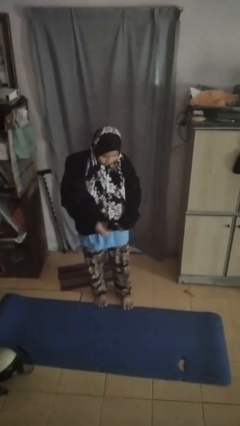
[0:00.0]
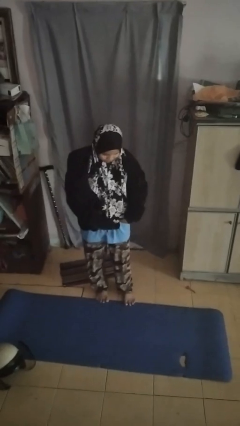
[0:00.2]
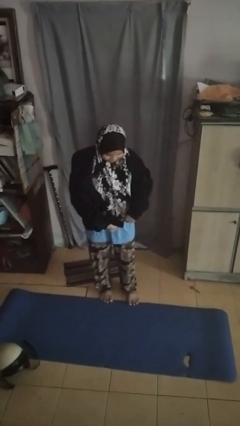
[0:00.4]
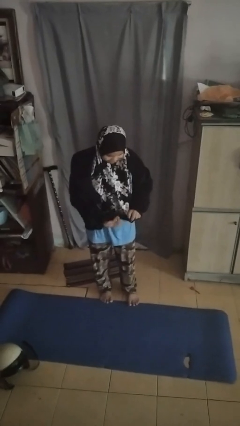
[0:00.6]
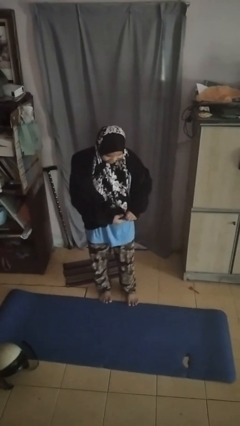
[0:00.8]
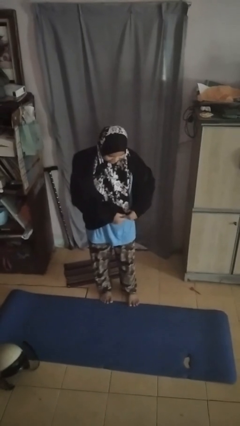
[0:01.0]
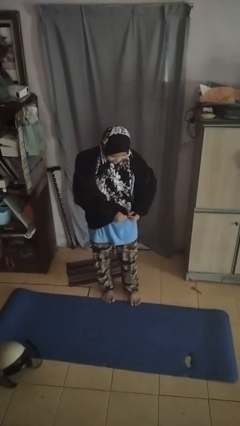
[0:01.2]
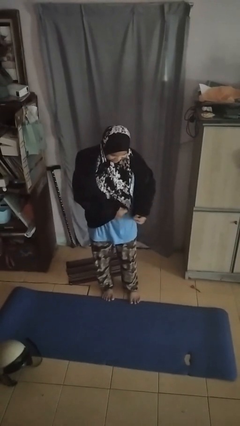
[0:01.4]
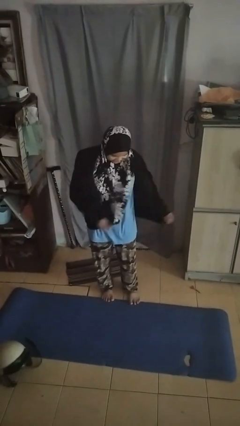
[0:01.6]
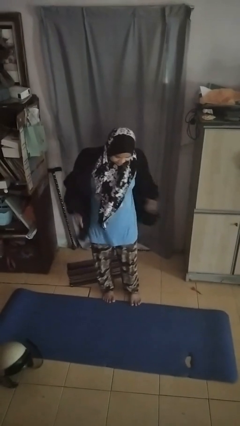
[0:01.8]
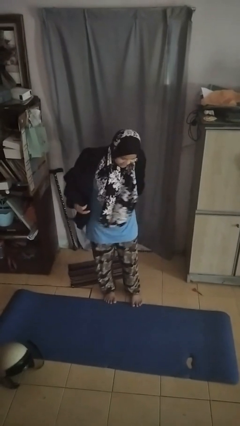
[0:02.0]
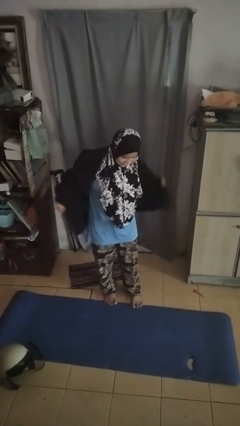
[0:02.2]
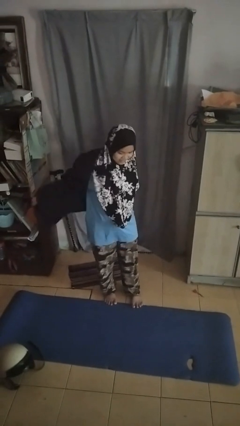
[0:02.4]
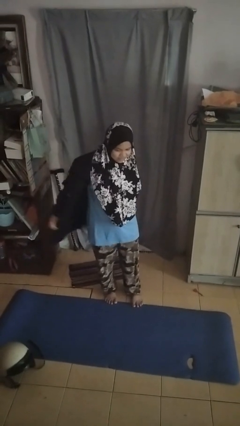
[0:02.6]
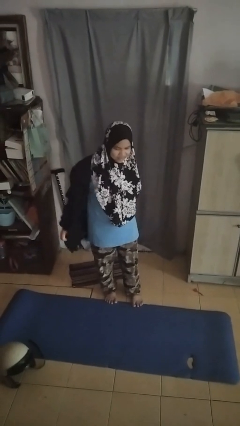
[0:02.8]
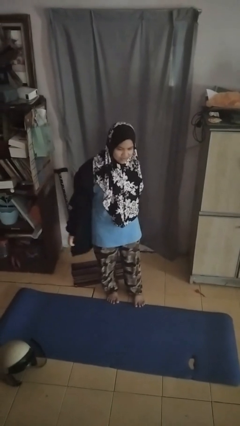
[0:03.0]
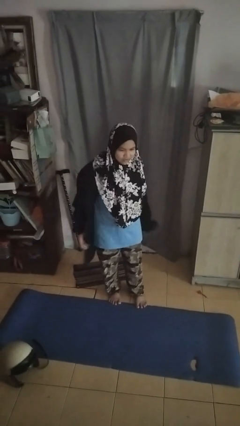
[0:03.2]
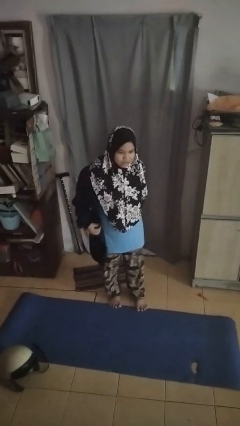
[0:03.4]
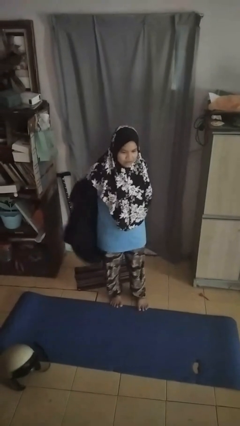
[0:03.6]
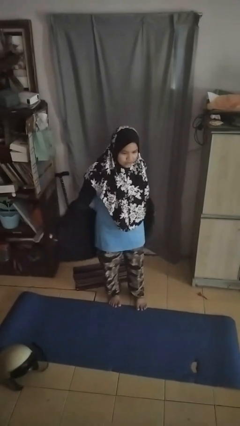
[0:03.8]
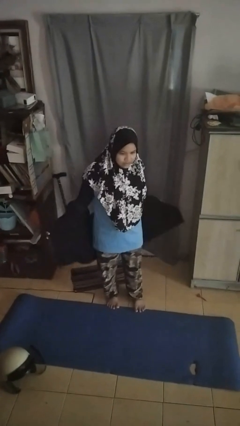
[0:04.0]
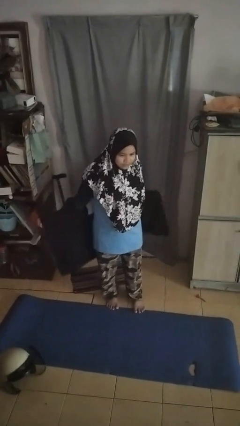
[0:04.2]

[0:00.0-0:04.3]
person takes off jacket

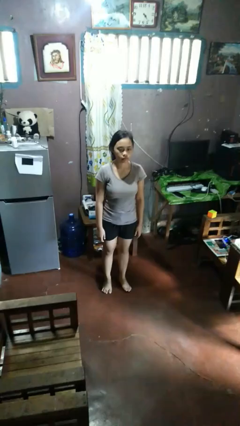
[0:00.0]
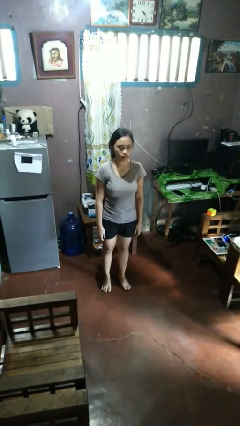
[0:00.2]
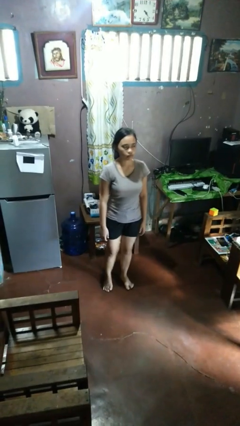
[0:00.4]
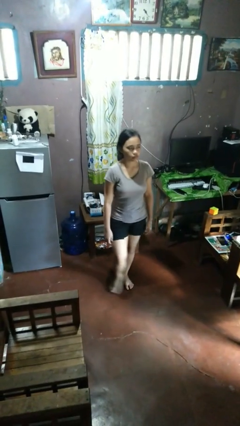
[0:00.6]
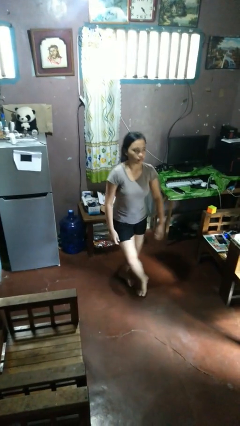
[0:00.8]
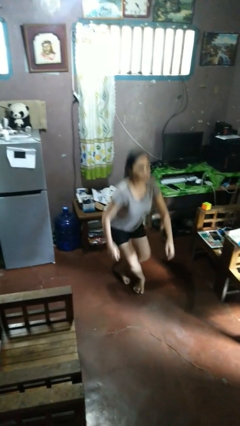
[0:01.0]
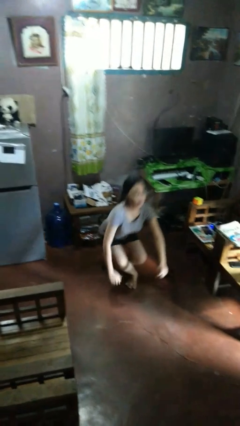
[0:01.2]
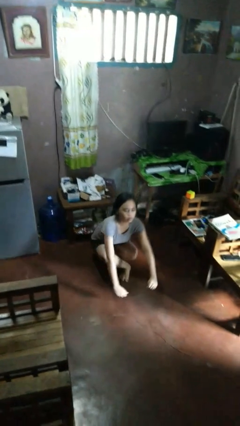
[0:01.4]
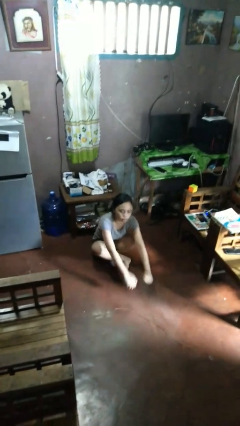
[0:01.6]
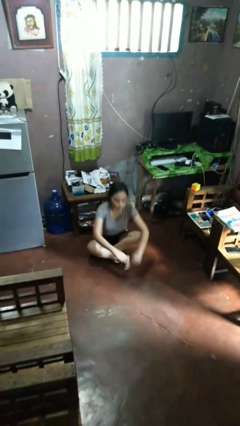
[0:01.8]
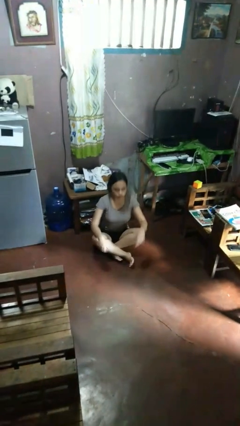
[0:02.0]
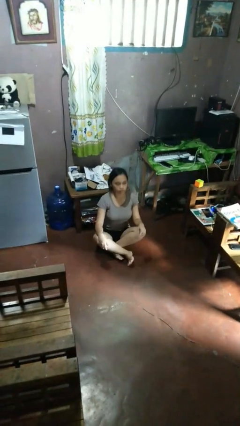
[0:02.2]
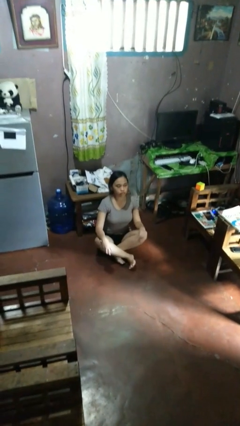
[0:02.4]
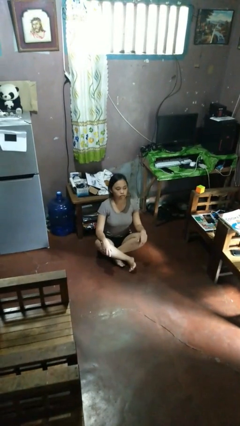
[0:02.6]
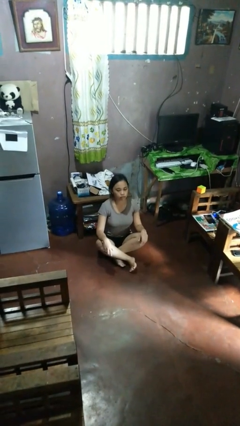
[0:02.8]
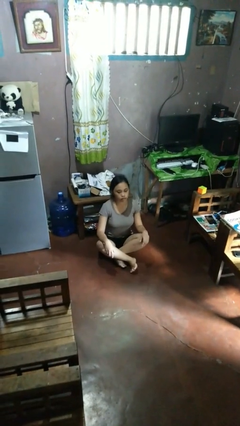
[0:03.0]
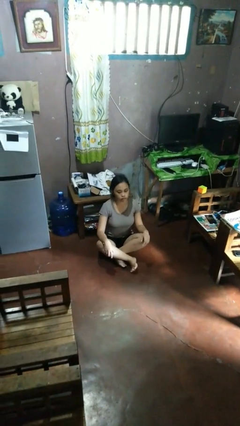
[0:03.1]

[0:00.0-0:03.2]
person sits crisscross

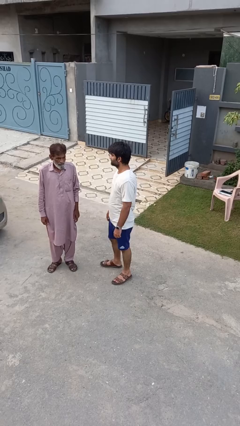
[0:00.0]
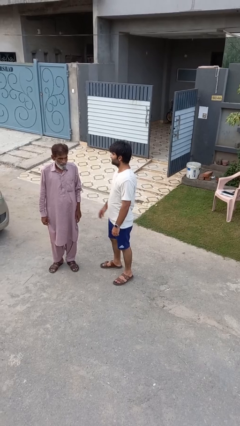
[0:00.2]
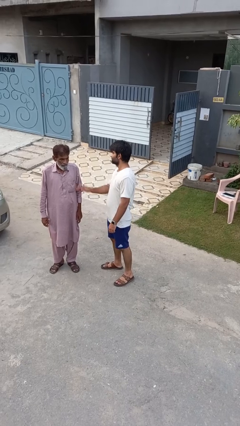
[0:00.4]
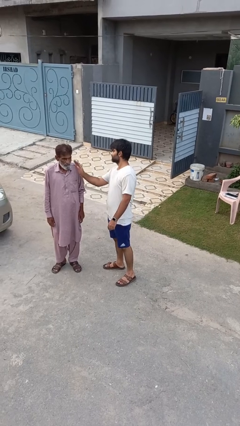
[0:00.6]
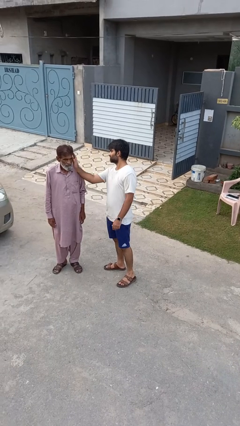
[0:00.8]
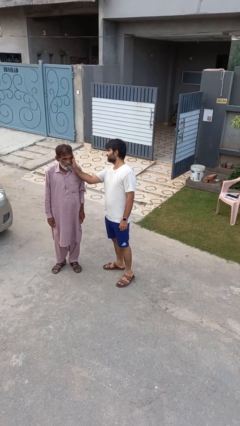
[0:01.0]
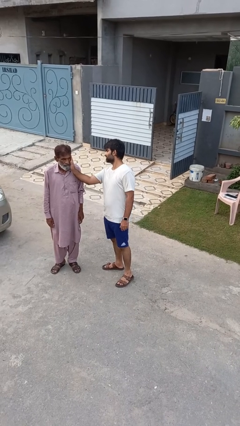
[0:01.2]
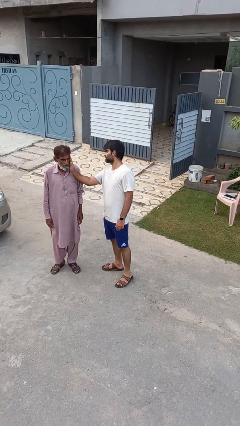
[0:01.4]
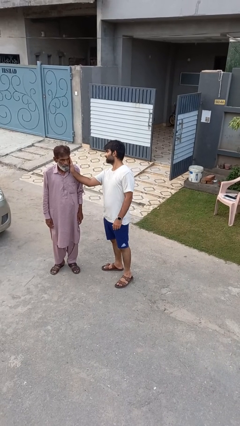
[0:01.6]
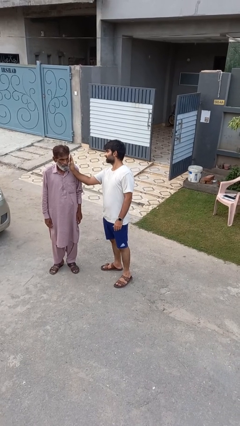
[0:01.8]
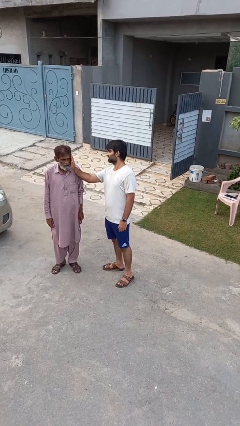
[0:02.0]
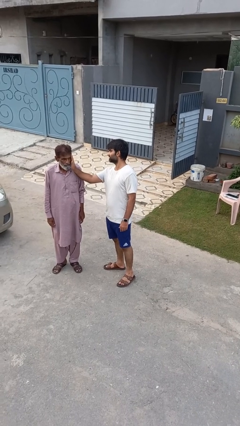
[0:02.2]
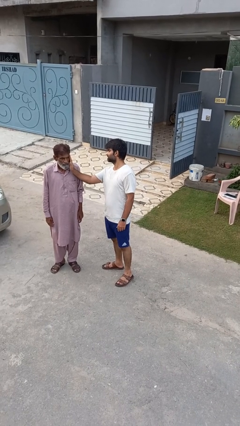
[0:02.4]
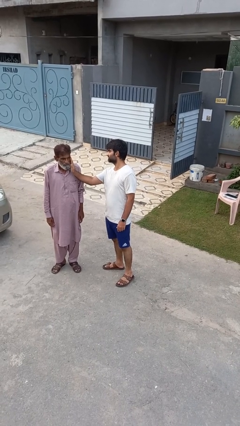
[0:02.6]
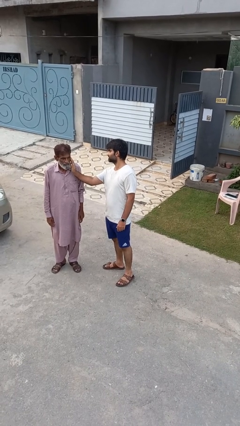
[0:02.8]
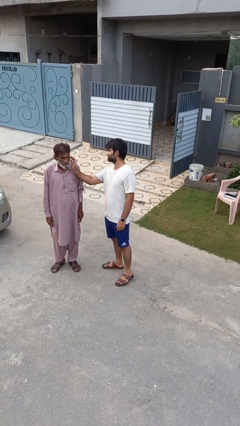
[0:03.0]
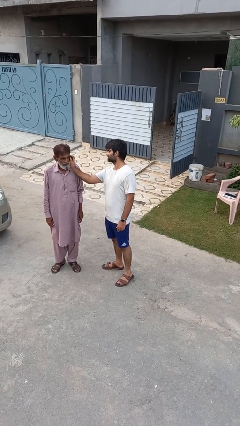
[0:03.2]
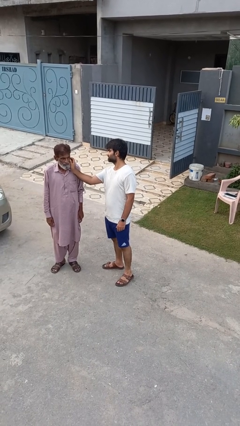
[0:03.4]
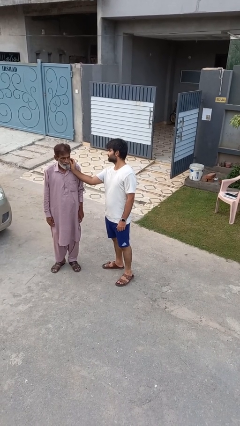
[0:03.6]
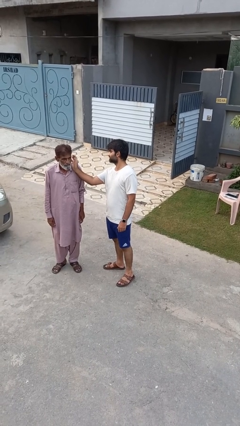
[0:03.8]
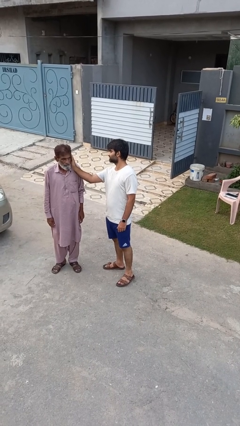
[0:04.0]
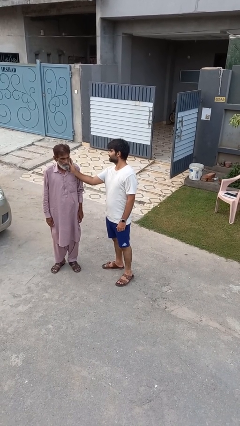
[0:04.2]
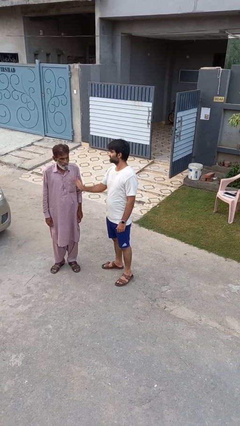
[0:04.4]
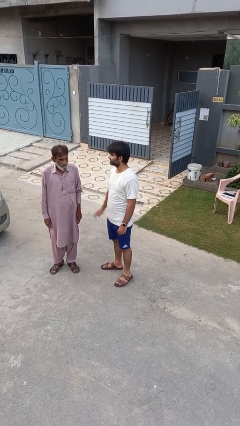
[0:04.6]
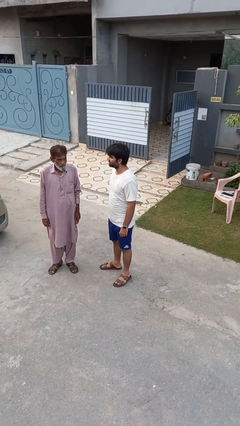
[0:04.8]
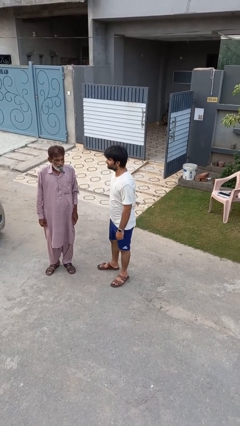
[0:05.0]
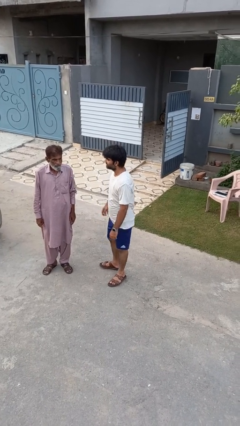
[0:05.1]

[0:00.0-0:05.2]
person touches face of person

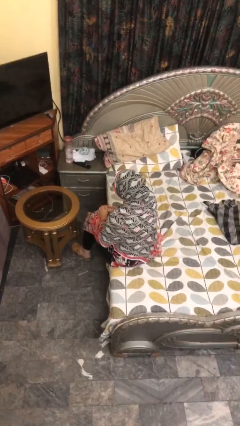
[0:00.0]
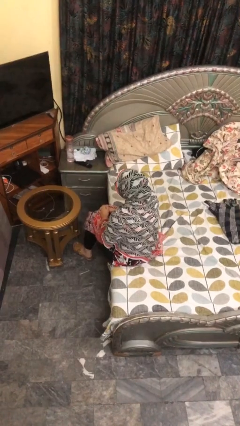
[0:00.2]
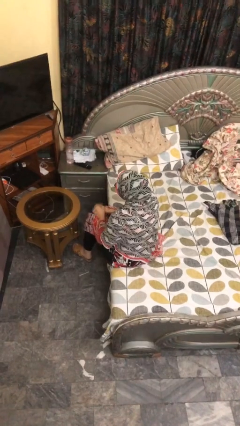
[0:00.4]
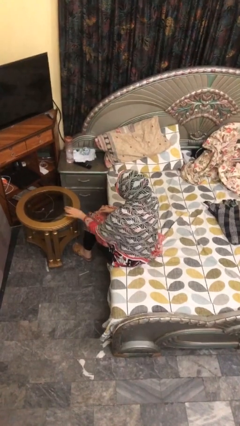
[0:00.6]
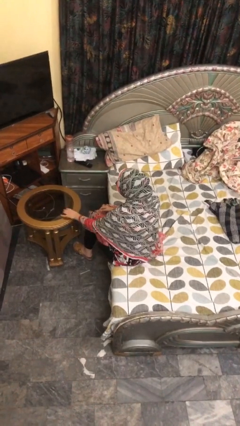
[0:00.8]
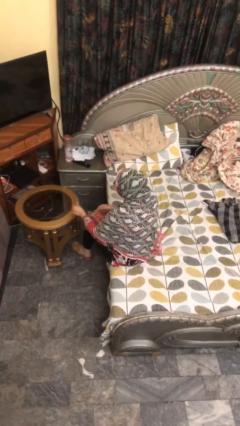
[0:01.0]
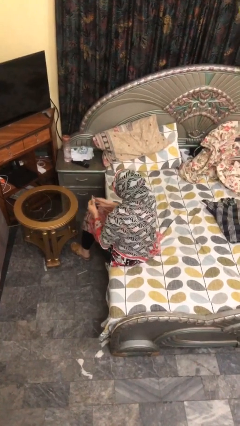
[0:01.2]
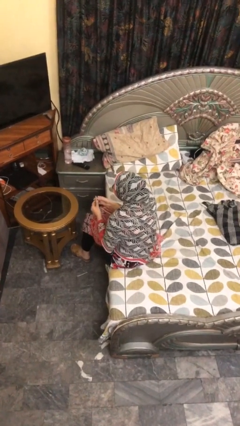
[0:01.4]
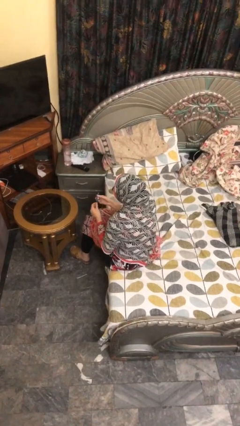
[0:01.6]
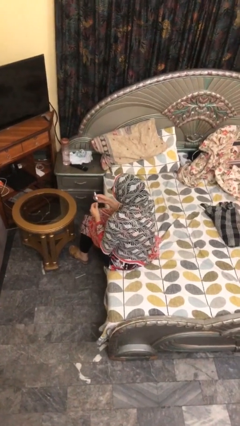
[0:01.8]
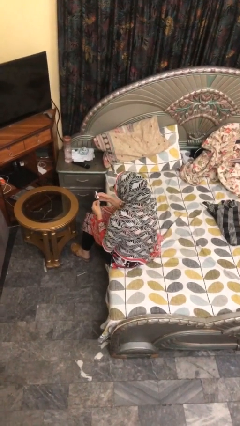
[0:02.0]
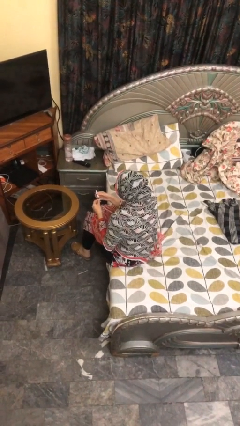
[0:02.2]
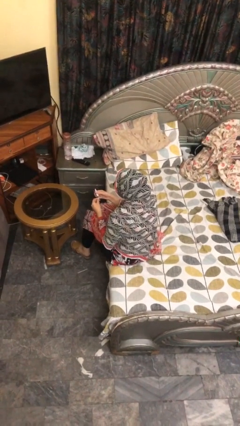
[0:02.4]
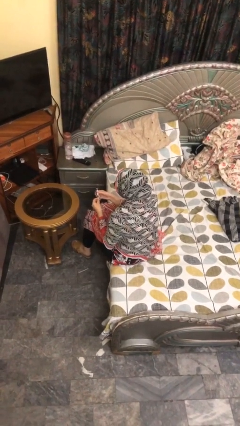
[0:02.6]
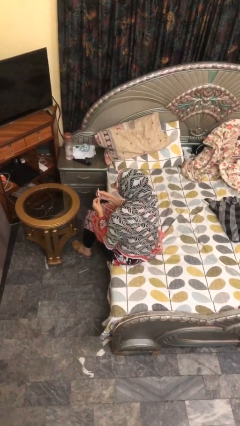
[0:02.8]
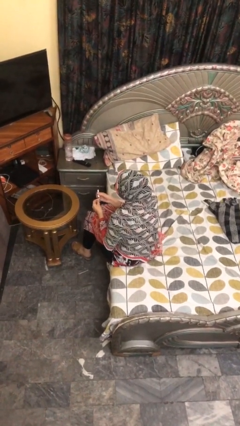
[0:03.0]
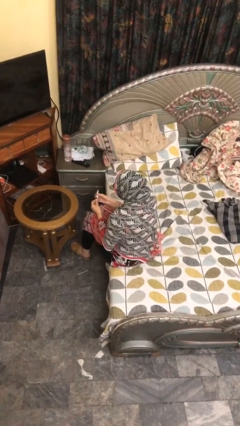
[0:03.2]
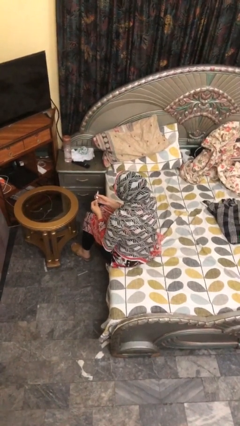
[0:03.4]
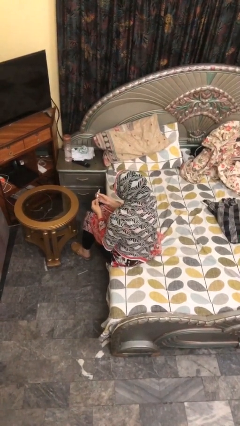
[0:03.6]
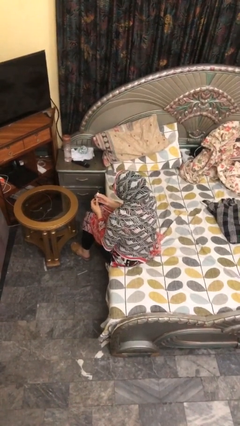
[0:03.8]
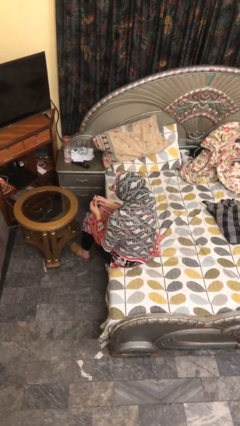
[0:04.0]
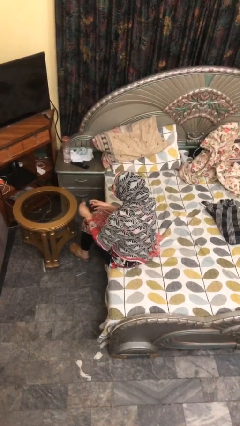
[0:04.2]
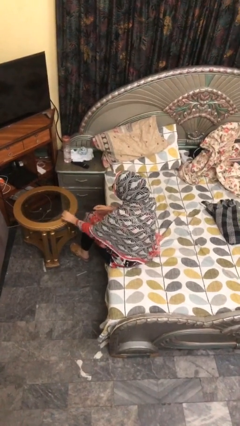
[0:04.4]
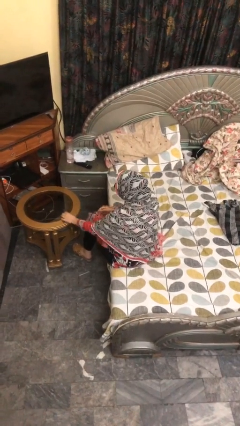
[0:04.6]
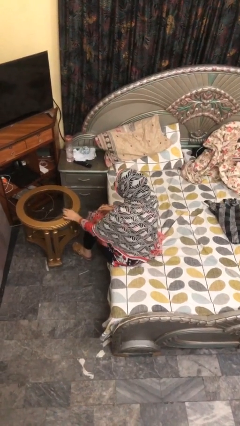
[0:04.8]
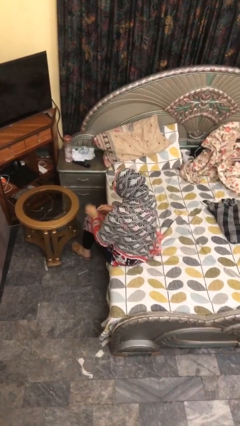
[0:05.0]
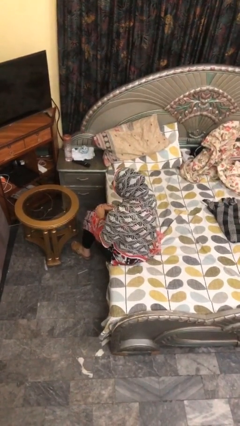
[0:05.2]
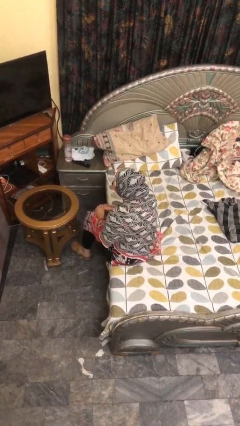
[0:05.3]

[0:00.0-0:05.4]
person clips fingernails
